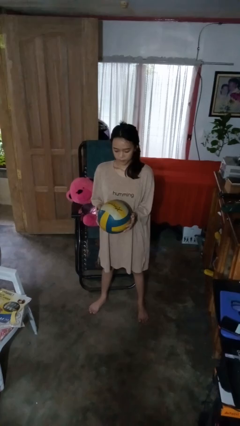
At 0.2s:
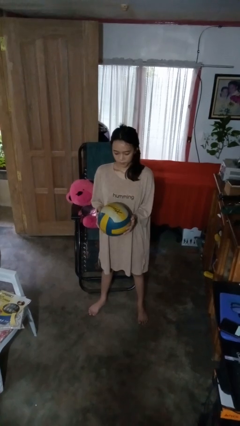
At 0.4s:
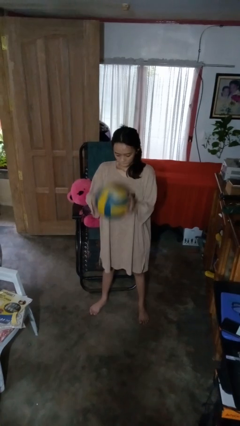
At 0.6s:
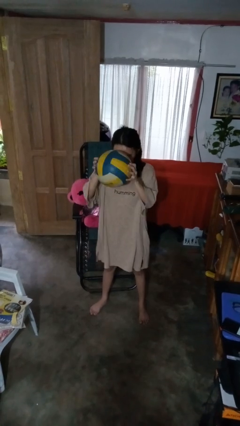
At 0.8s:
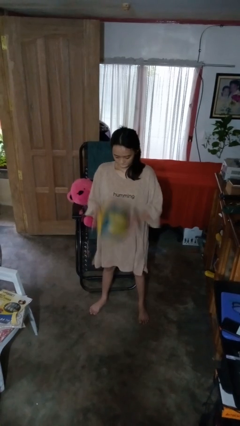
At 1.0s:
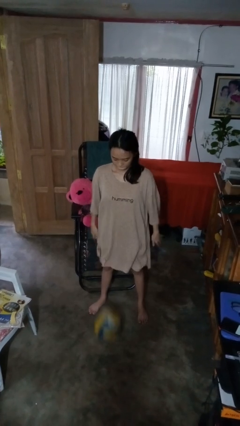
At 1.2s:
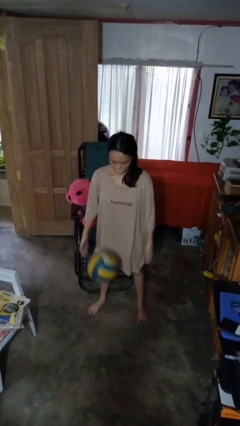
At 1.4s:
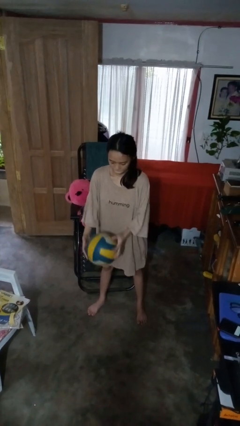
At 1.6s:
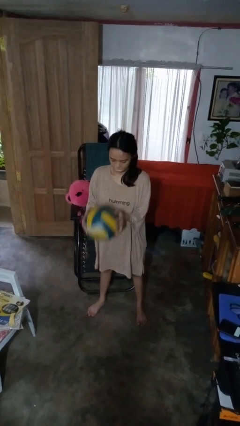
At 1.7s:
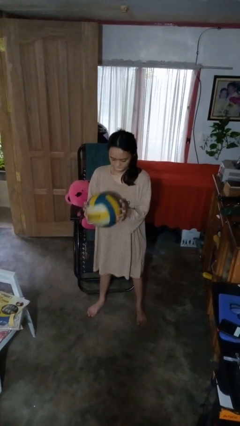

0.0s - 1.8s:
person bounces ball on floor

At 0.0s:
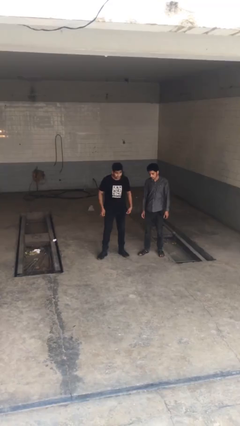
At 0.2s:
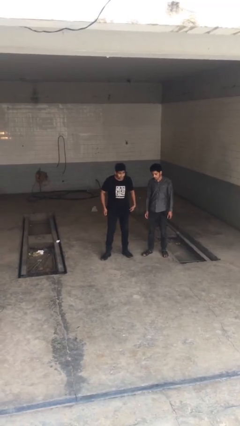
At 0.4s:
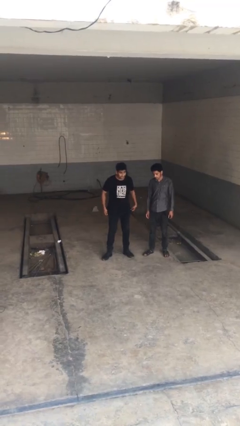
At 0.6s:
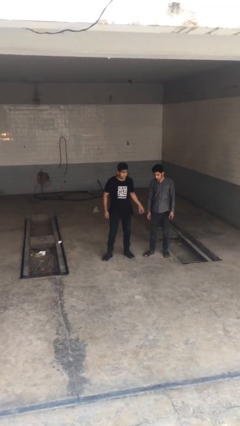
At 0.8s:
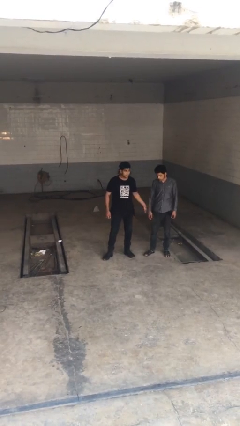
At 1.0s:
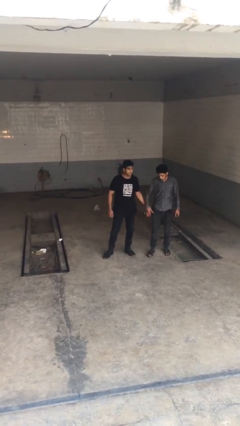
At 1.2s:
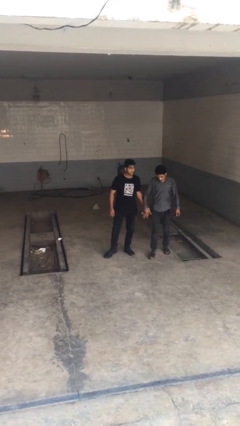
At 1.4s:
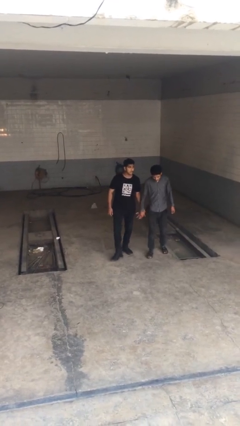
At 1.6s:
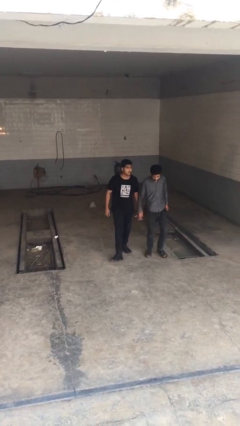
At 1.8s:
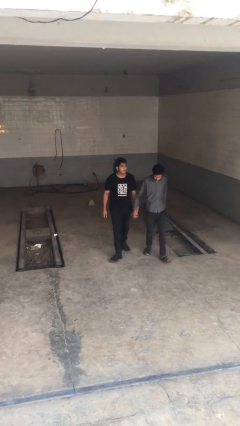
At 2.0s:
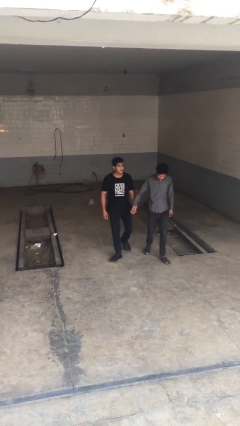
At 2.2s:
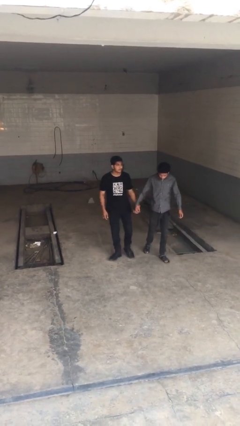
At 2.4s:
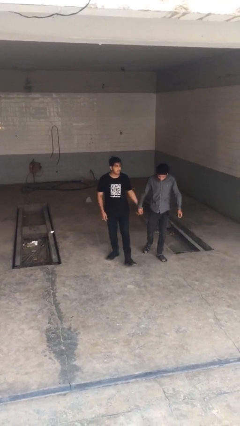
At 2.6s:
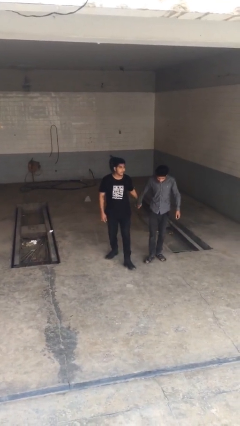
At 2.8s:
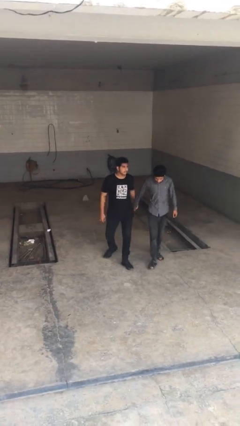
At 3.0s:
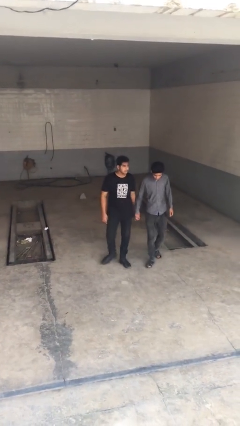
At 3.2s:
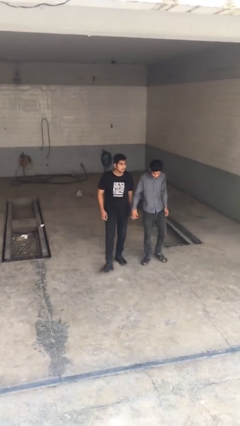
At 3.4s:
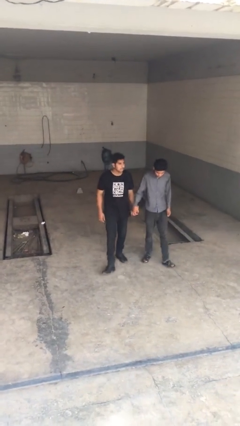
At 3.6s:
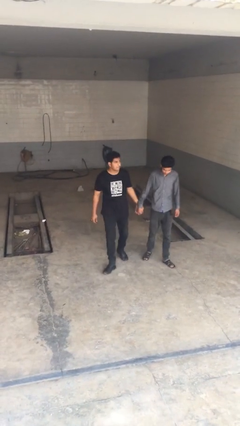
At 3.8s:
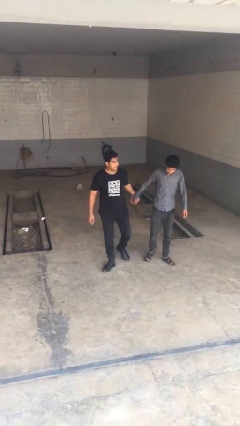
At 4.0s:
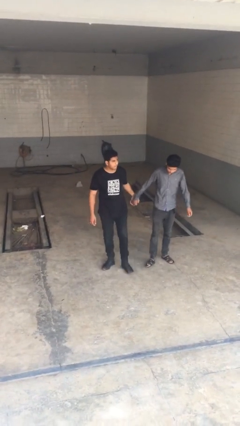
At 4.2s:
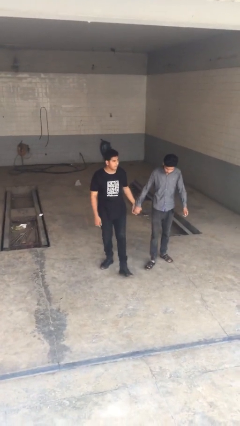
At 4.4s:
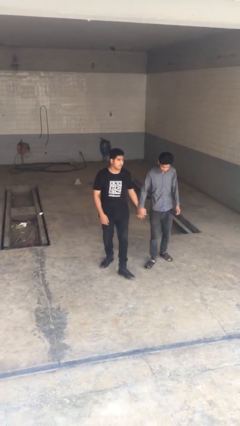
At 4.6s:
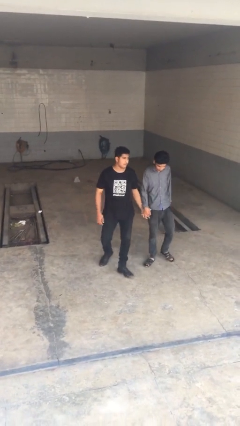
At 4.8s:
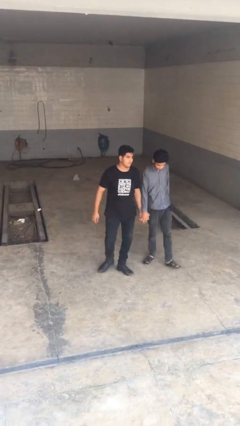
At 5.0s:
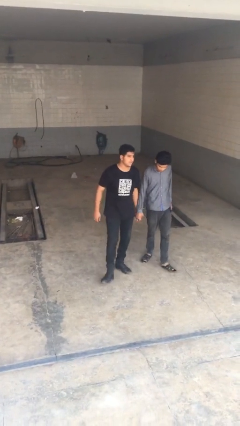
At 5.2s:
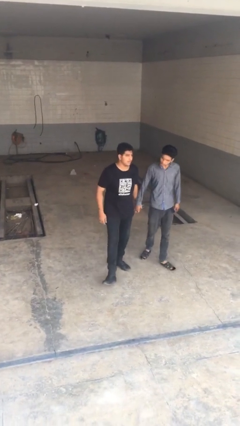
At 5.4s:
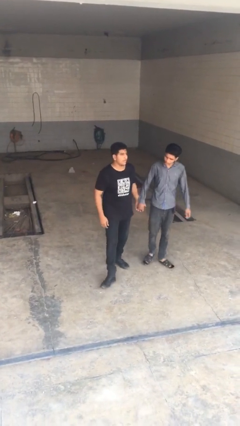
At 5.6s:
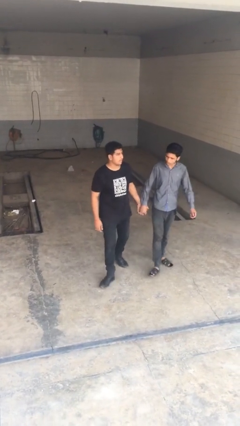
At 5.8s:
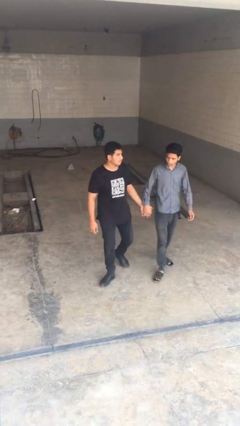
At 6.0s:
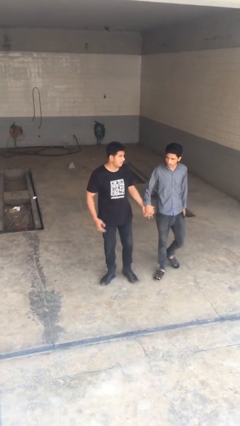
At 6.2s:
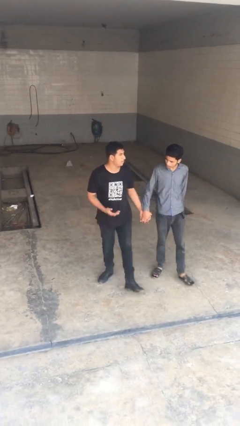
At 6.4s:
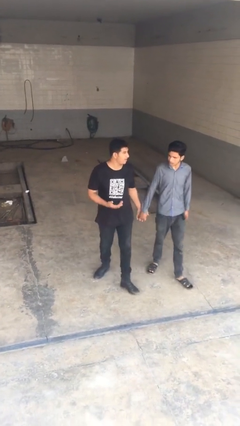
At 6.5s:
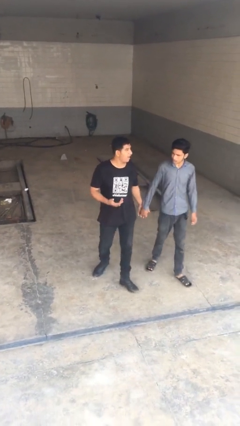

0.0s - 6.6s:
person holds hand

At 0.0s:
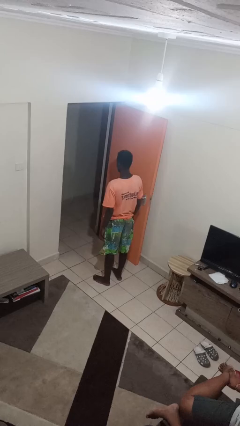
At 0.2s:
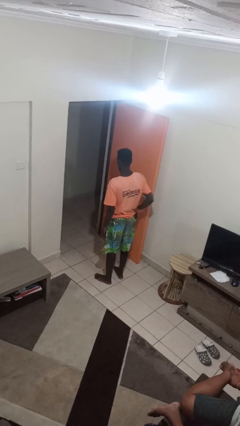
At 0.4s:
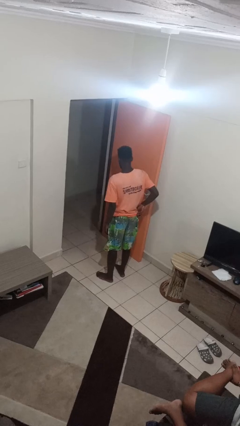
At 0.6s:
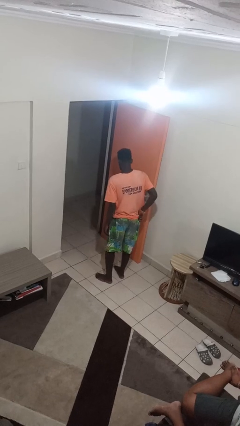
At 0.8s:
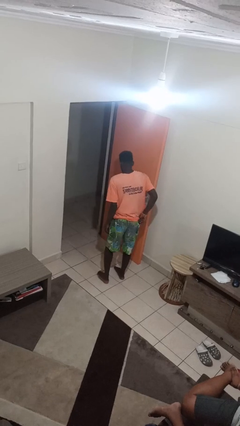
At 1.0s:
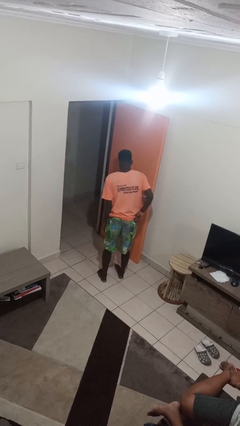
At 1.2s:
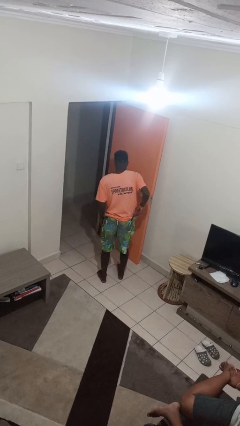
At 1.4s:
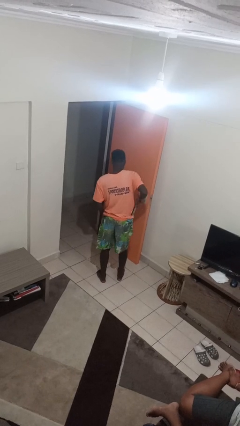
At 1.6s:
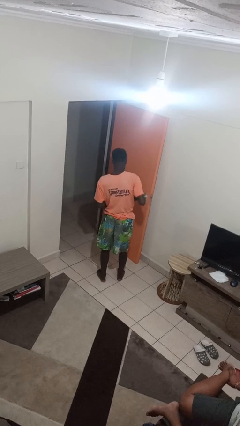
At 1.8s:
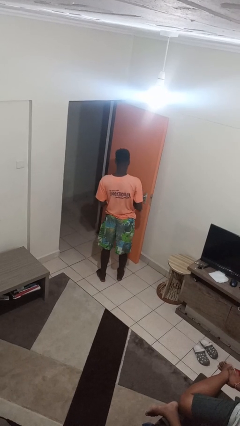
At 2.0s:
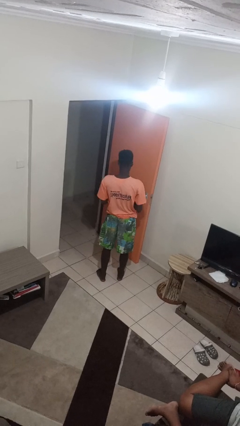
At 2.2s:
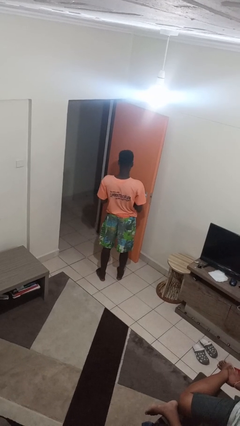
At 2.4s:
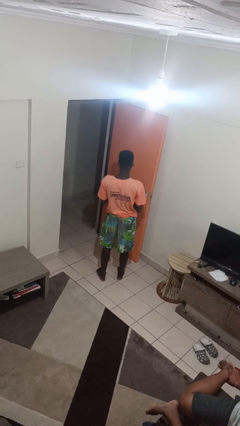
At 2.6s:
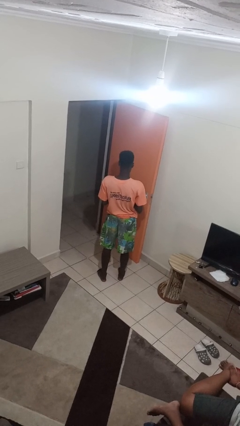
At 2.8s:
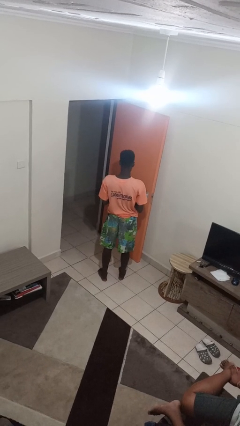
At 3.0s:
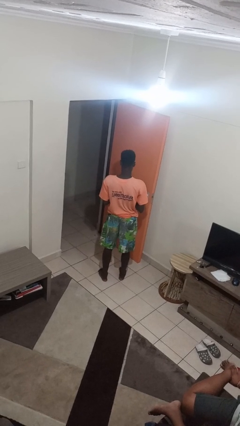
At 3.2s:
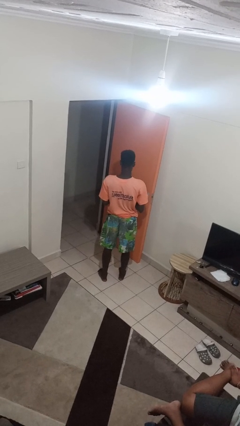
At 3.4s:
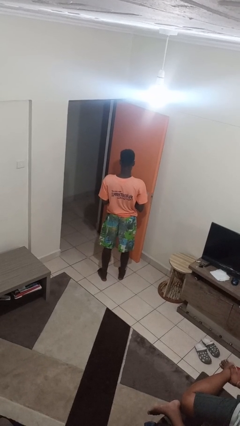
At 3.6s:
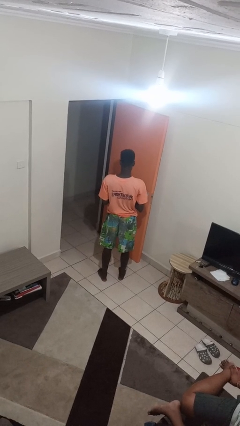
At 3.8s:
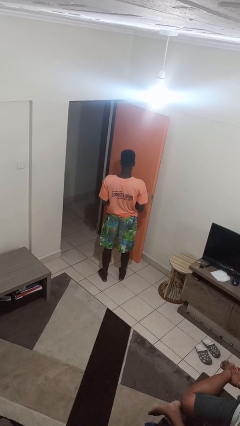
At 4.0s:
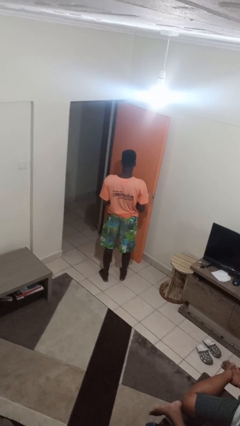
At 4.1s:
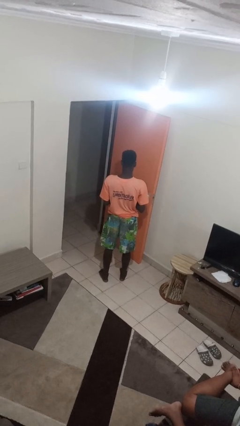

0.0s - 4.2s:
person takes phone from pocket

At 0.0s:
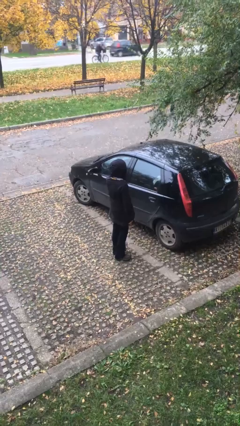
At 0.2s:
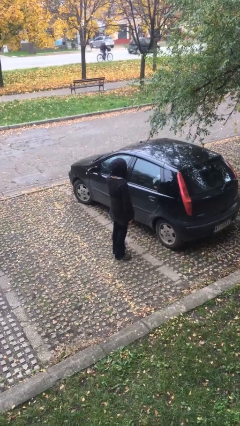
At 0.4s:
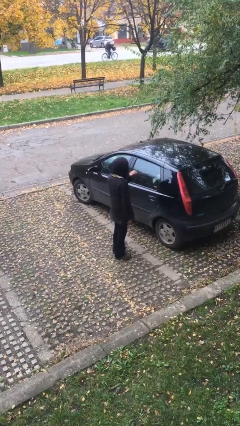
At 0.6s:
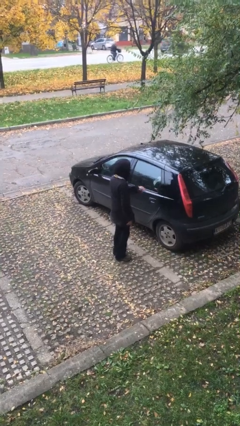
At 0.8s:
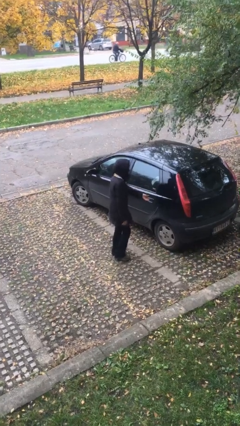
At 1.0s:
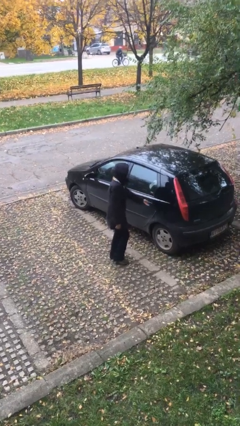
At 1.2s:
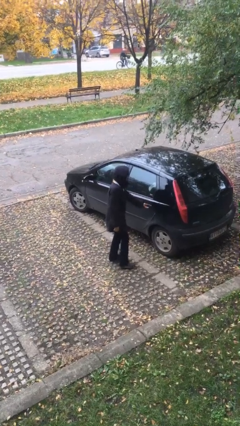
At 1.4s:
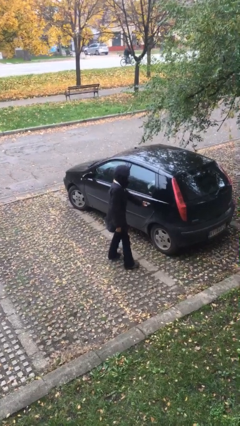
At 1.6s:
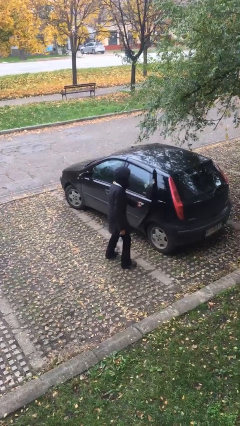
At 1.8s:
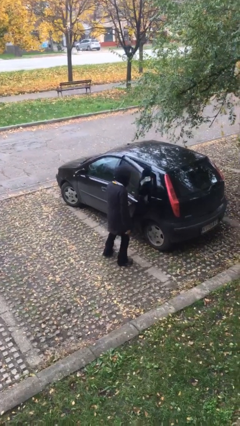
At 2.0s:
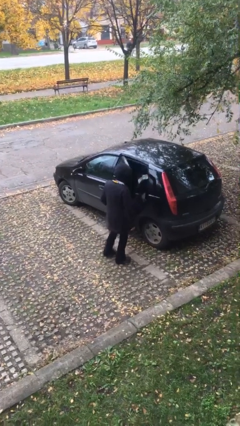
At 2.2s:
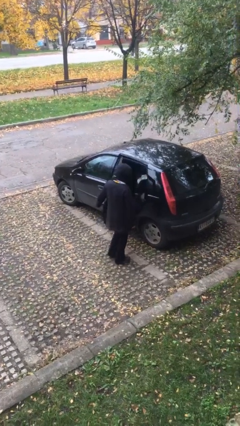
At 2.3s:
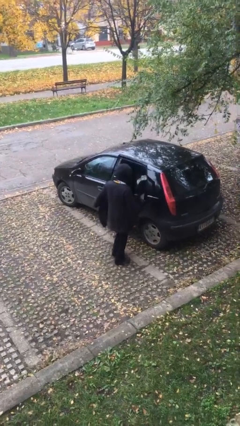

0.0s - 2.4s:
person opens car door

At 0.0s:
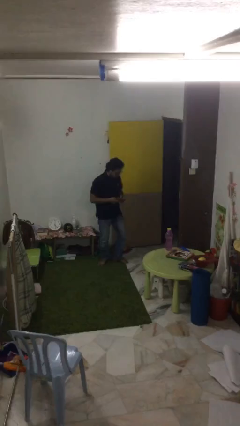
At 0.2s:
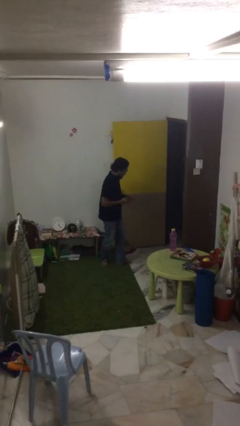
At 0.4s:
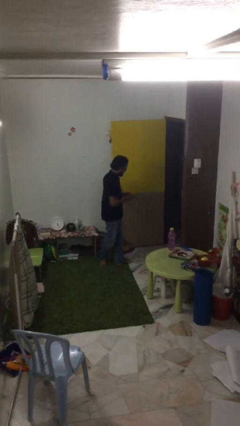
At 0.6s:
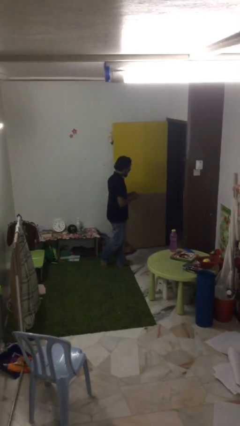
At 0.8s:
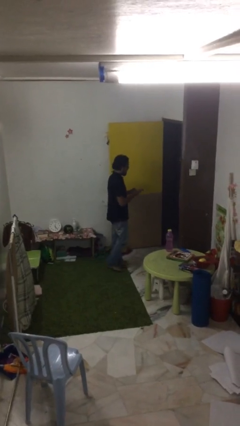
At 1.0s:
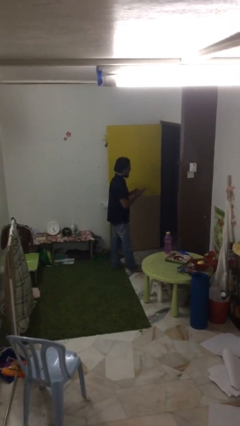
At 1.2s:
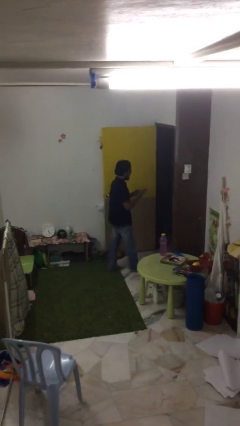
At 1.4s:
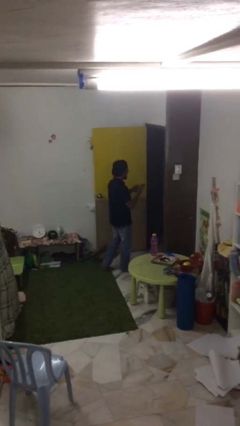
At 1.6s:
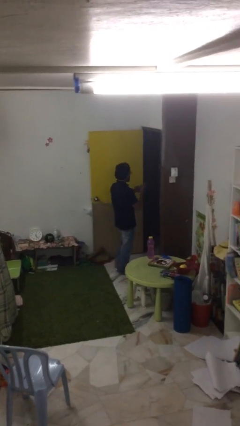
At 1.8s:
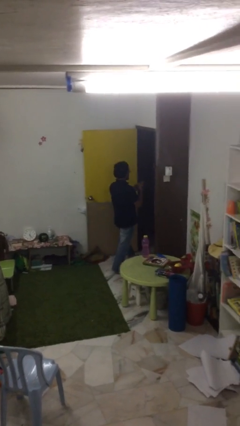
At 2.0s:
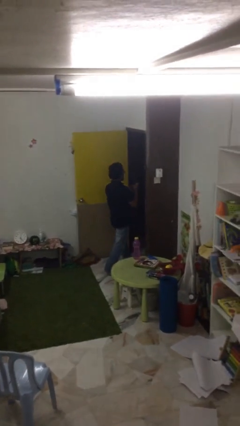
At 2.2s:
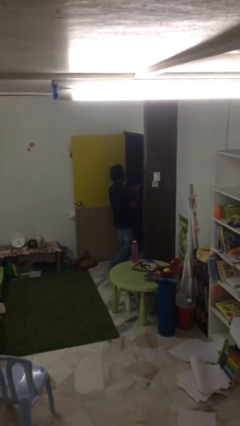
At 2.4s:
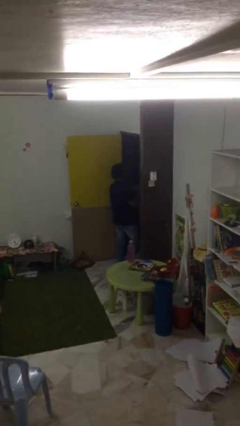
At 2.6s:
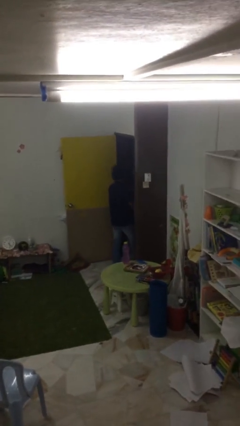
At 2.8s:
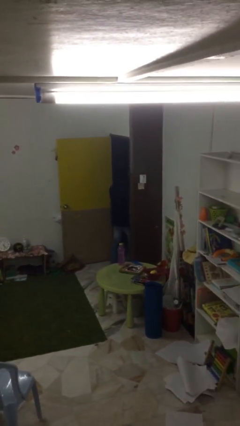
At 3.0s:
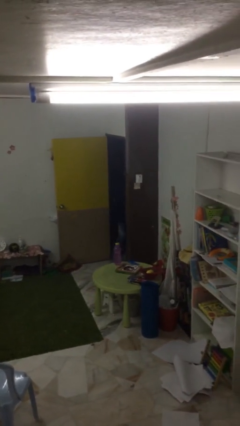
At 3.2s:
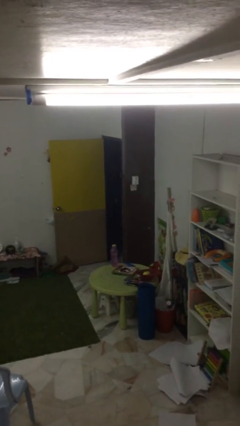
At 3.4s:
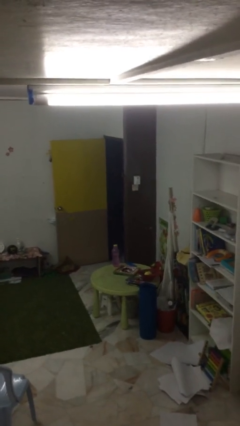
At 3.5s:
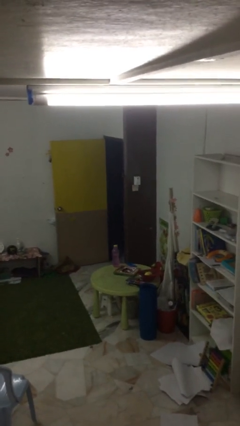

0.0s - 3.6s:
person exits scene through structure
